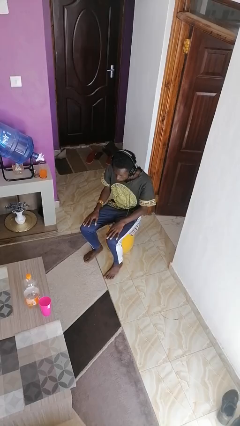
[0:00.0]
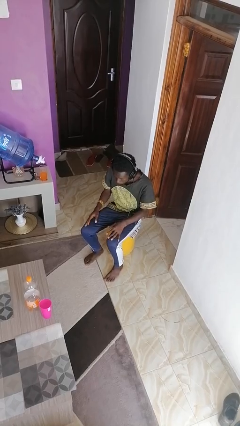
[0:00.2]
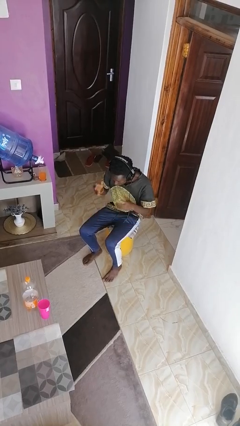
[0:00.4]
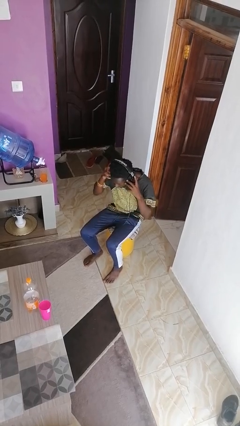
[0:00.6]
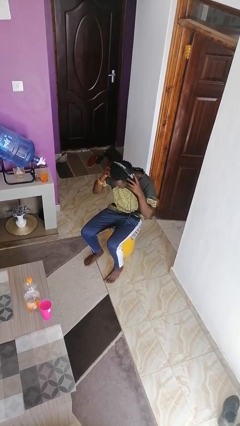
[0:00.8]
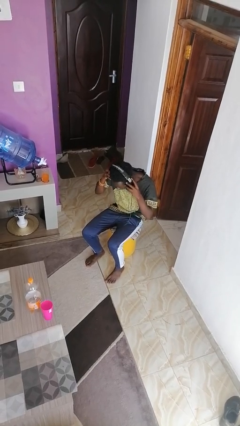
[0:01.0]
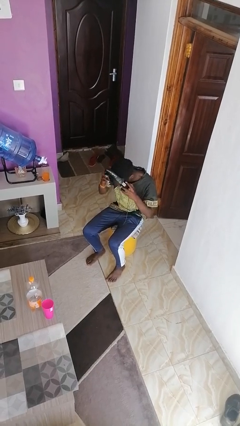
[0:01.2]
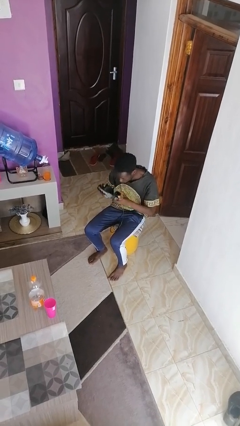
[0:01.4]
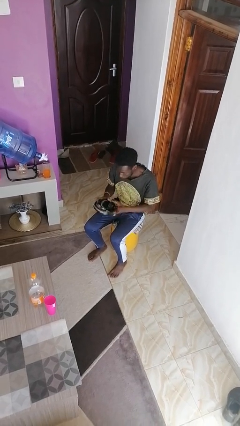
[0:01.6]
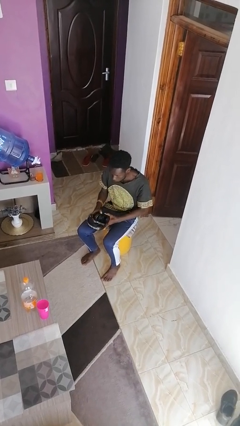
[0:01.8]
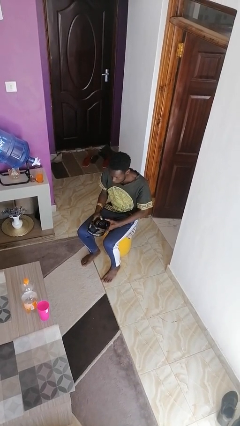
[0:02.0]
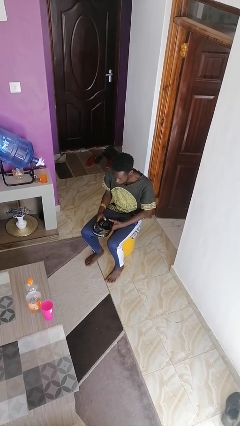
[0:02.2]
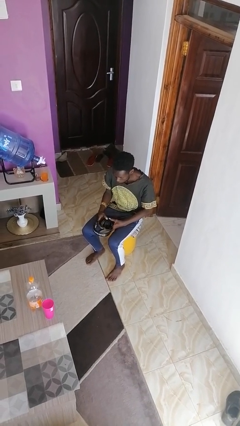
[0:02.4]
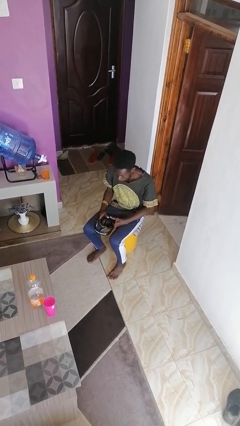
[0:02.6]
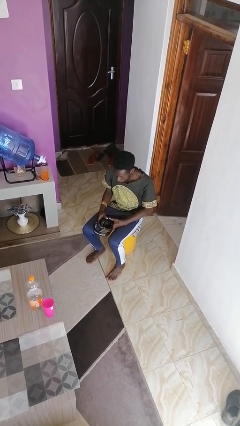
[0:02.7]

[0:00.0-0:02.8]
person takes off headphones

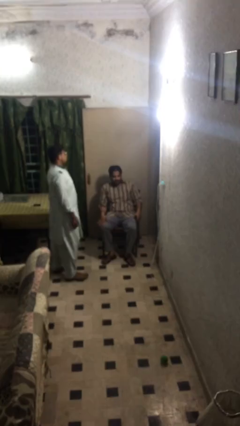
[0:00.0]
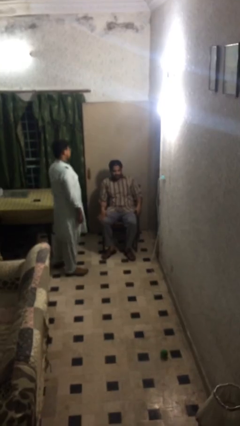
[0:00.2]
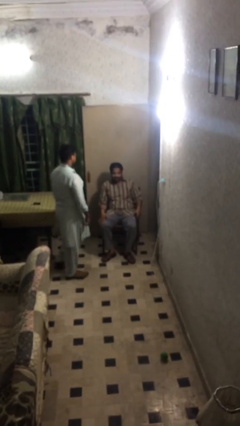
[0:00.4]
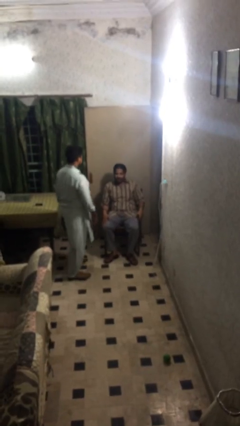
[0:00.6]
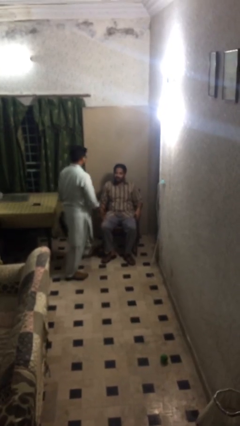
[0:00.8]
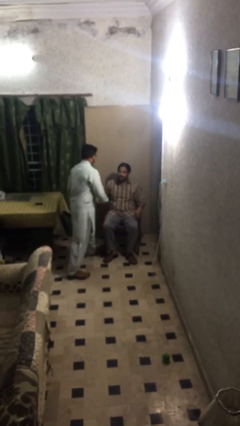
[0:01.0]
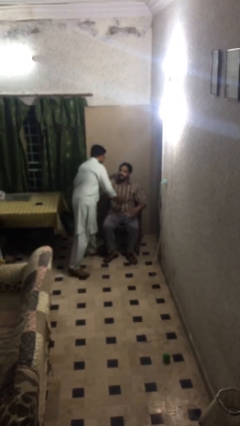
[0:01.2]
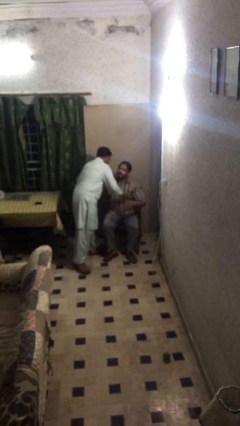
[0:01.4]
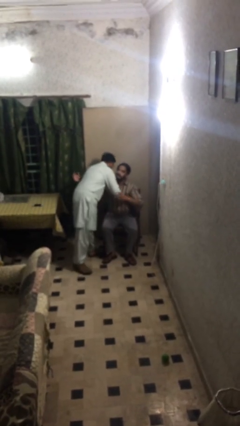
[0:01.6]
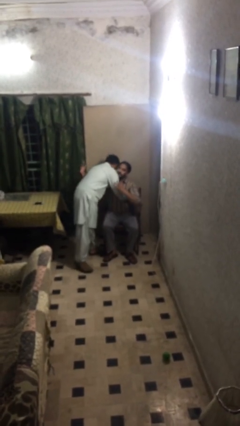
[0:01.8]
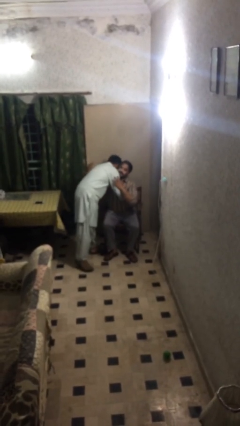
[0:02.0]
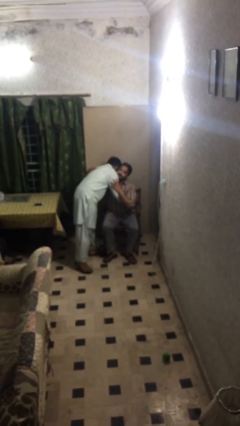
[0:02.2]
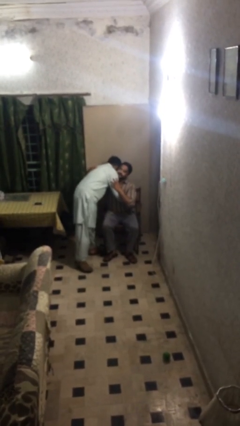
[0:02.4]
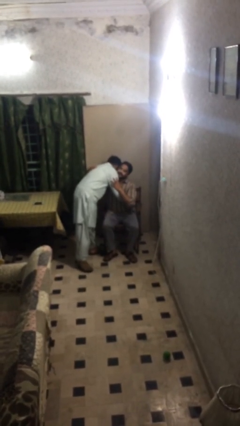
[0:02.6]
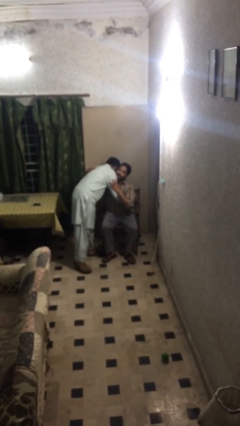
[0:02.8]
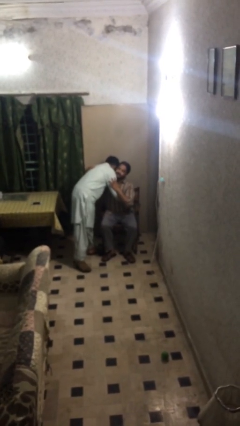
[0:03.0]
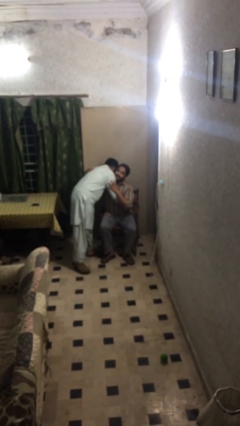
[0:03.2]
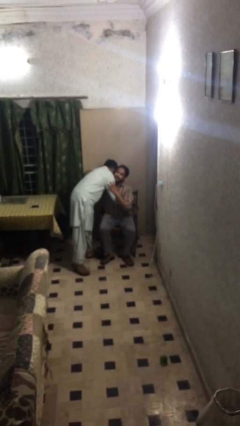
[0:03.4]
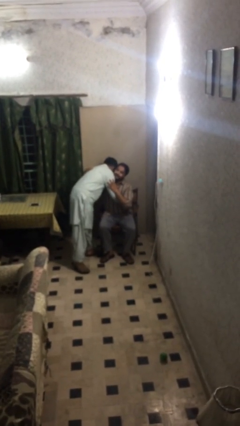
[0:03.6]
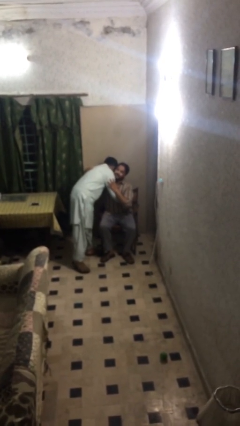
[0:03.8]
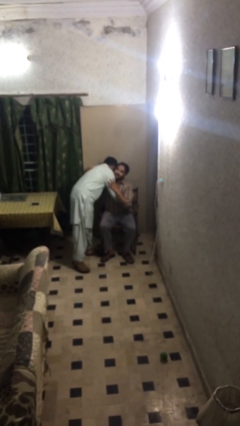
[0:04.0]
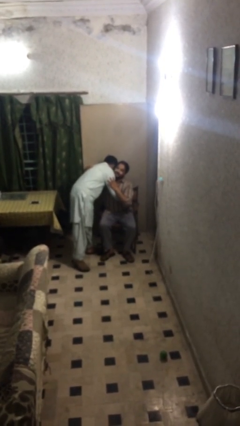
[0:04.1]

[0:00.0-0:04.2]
person embraces person

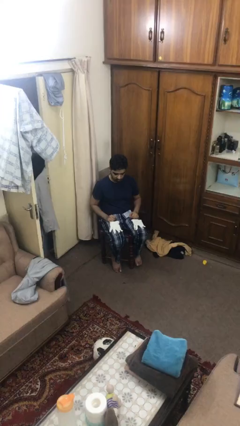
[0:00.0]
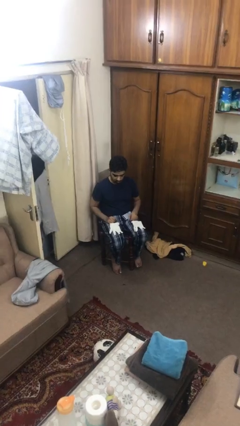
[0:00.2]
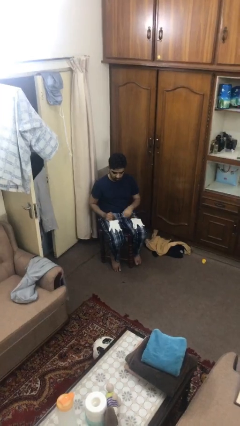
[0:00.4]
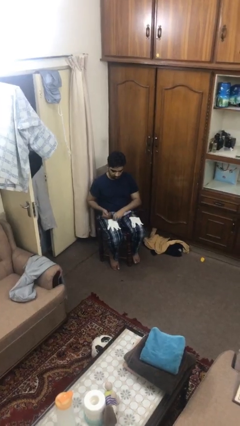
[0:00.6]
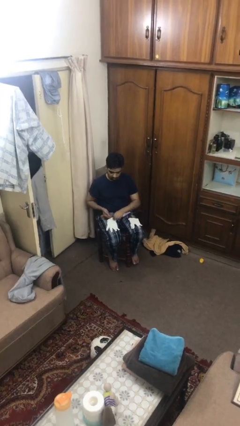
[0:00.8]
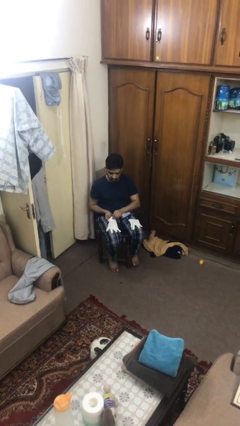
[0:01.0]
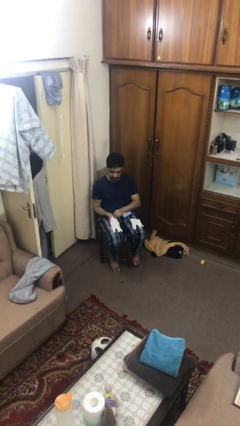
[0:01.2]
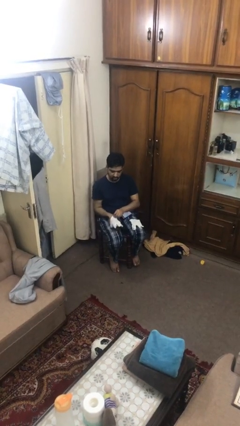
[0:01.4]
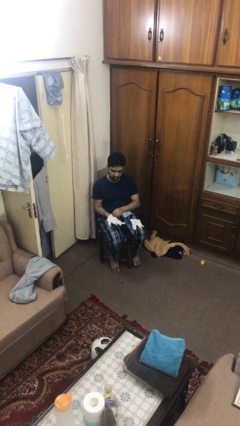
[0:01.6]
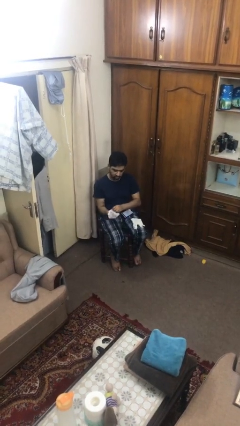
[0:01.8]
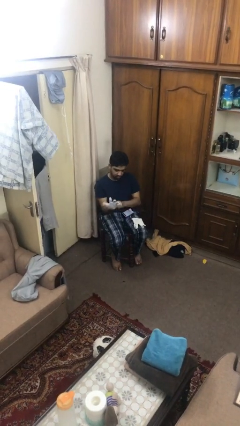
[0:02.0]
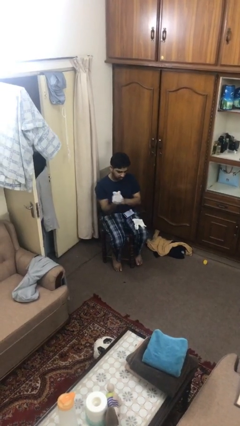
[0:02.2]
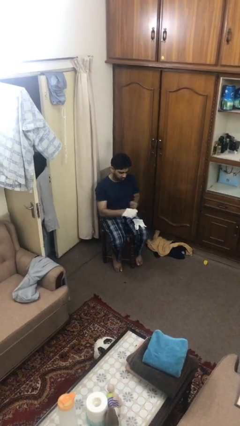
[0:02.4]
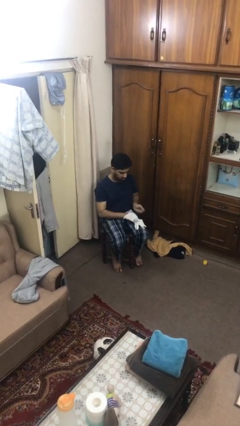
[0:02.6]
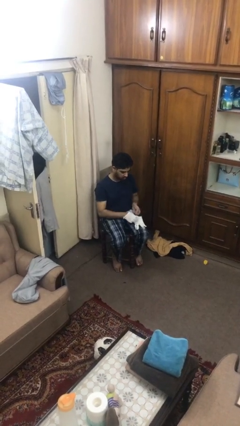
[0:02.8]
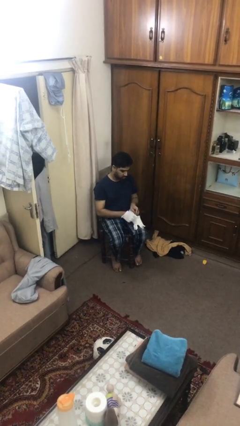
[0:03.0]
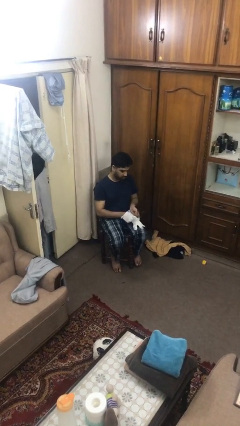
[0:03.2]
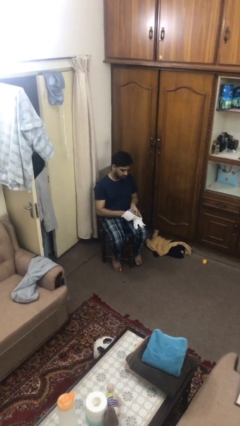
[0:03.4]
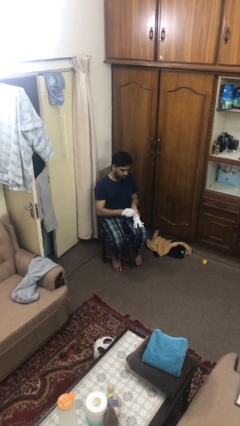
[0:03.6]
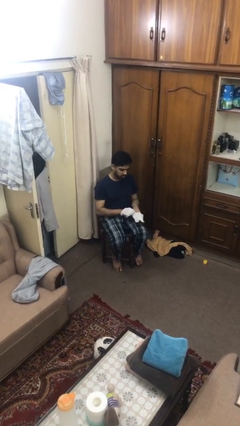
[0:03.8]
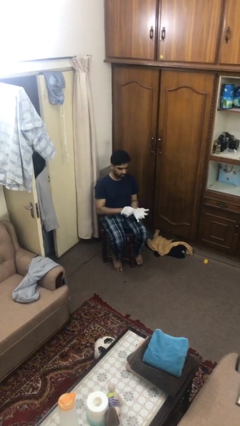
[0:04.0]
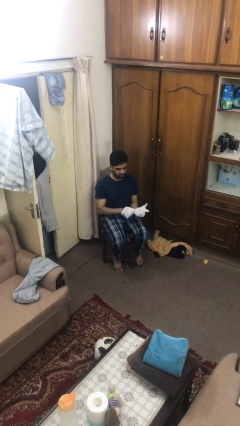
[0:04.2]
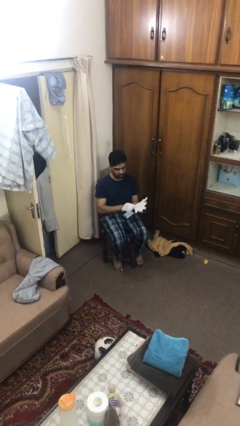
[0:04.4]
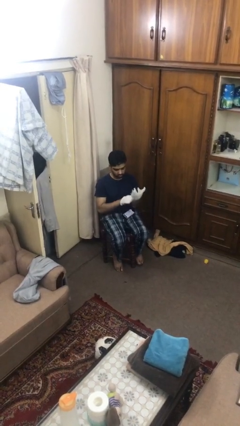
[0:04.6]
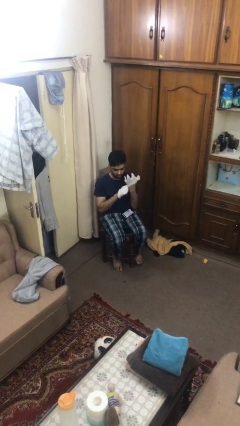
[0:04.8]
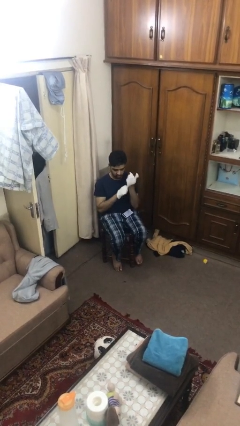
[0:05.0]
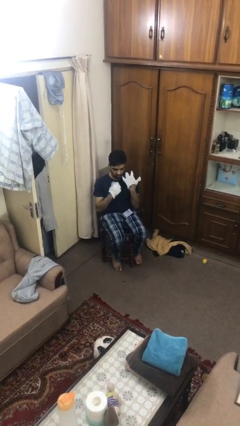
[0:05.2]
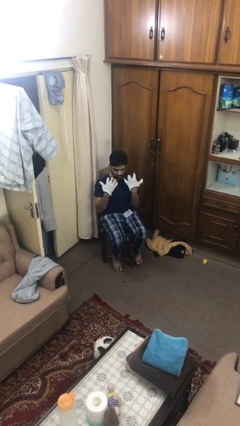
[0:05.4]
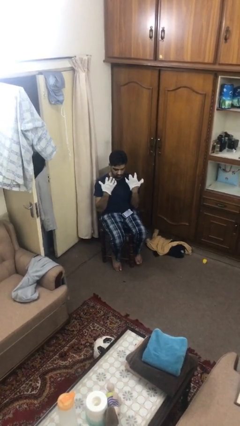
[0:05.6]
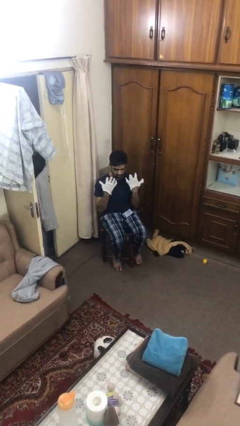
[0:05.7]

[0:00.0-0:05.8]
person puts on gloves

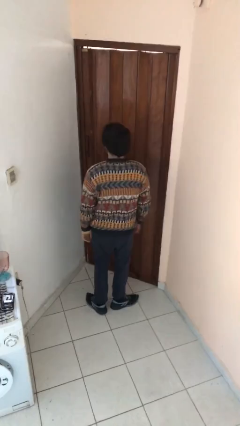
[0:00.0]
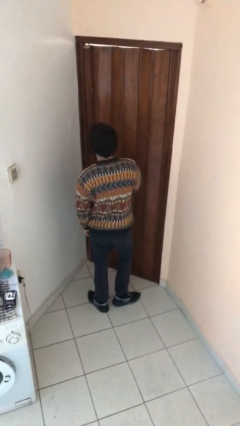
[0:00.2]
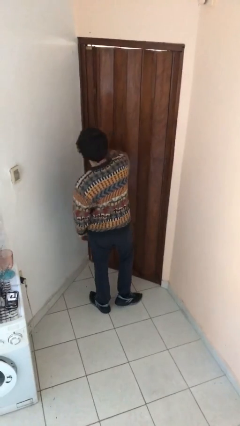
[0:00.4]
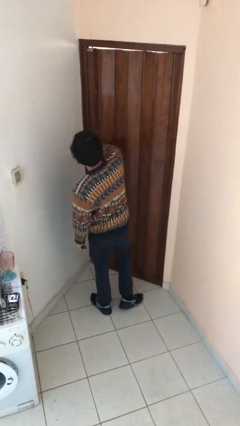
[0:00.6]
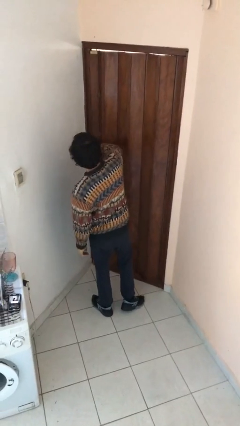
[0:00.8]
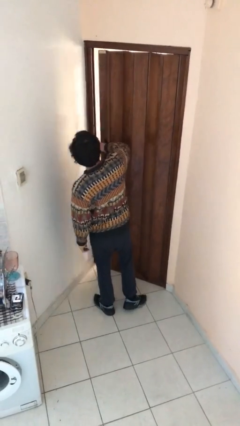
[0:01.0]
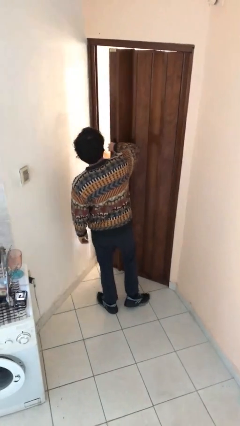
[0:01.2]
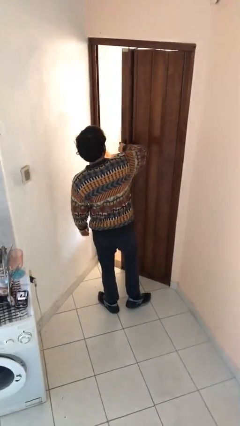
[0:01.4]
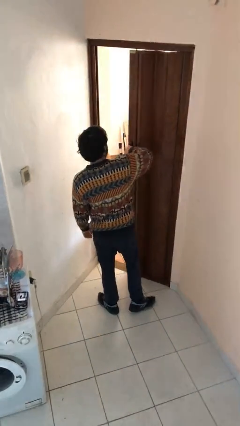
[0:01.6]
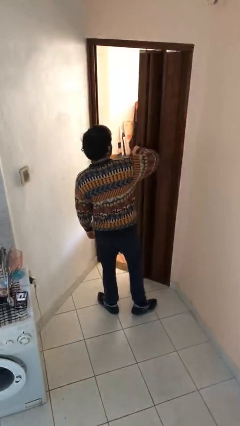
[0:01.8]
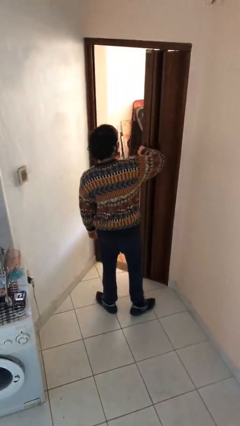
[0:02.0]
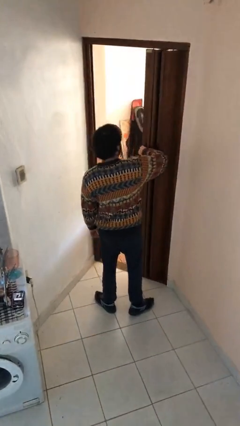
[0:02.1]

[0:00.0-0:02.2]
person opens sliding door

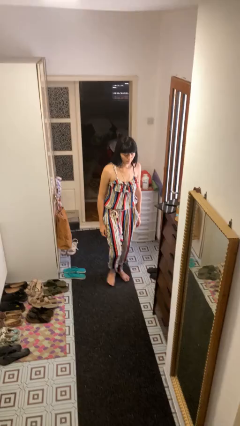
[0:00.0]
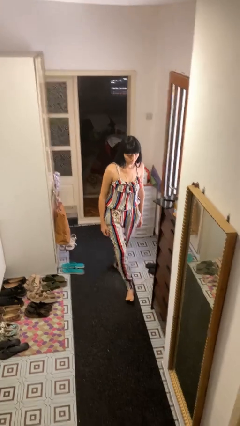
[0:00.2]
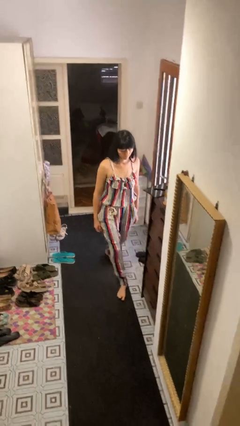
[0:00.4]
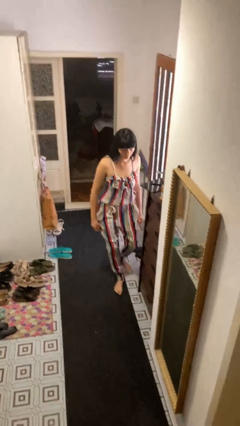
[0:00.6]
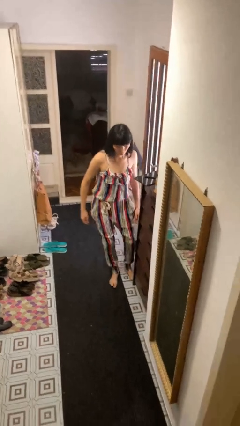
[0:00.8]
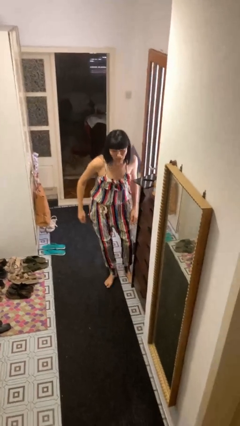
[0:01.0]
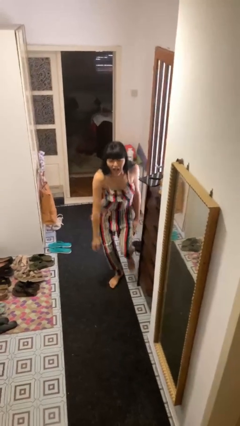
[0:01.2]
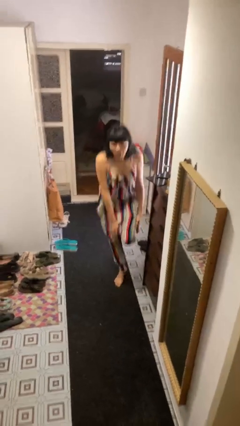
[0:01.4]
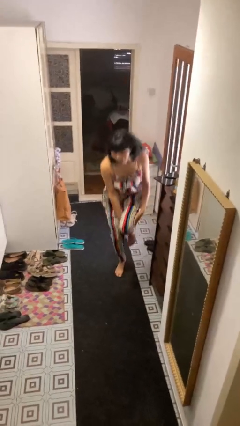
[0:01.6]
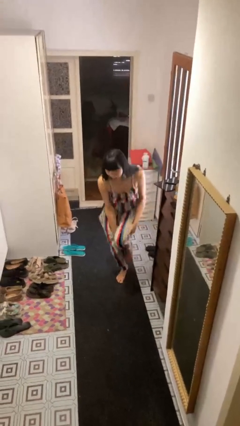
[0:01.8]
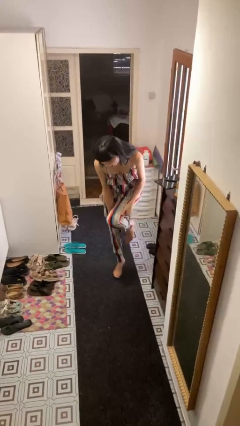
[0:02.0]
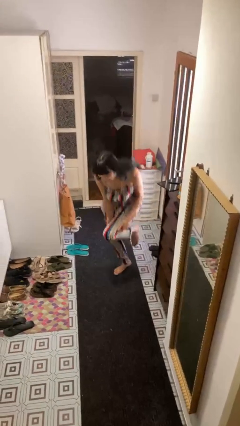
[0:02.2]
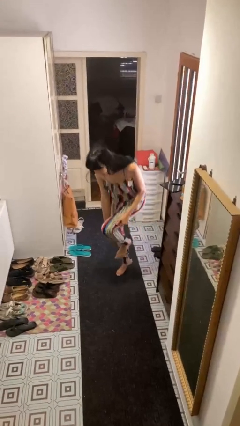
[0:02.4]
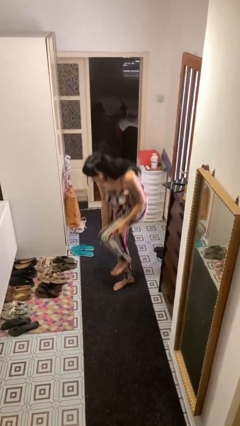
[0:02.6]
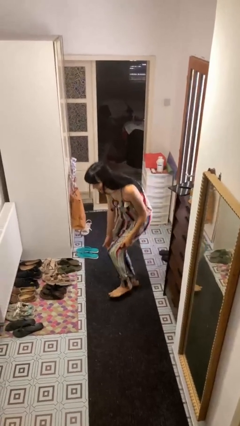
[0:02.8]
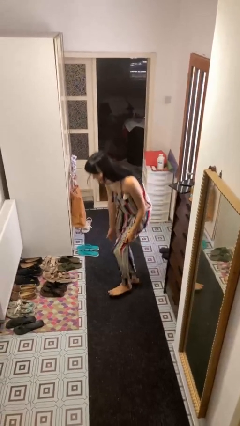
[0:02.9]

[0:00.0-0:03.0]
person stubs toe
